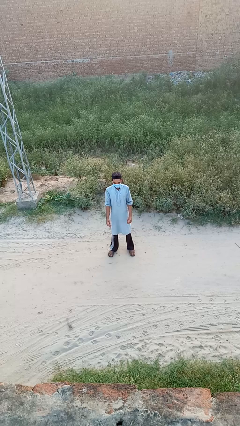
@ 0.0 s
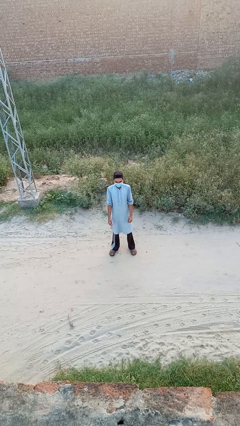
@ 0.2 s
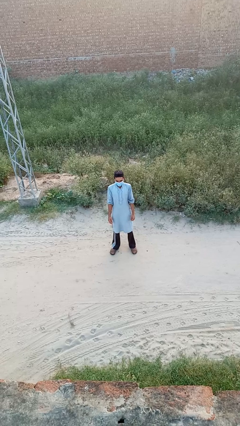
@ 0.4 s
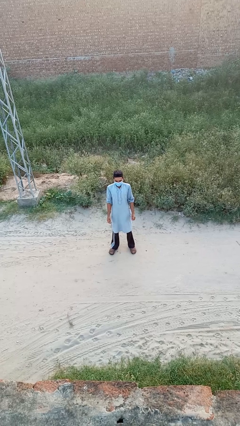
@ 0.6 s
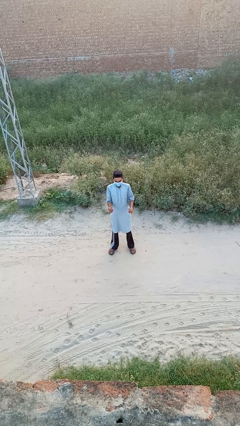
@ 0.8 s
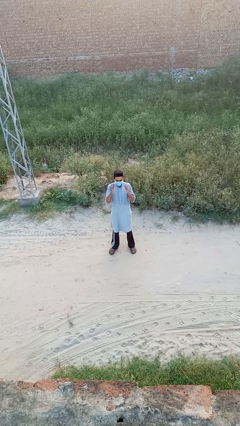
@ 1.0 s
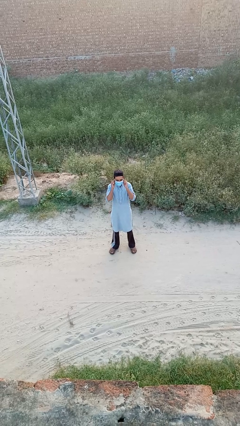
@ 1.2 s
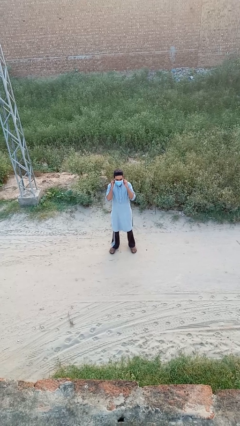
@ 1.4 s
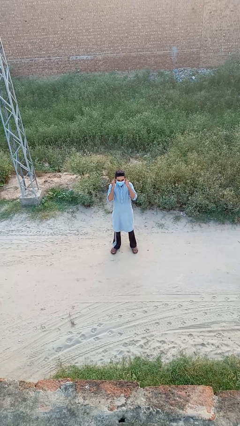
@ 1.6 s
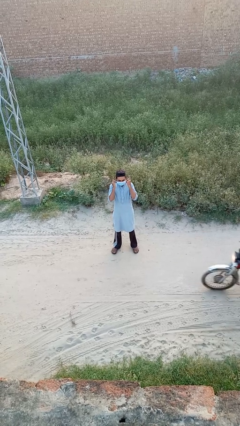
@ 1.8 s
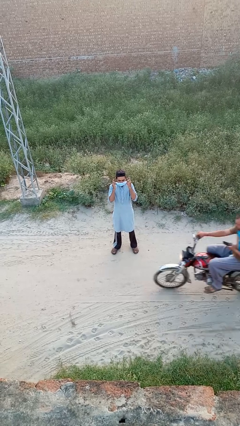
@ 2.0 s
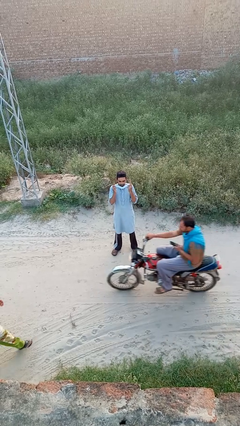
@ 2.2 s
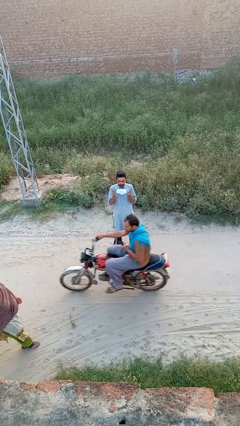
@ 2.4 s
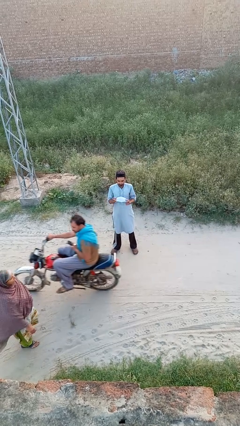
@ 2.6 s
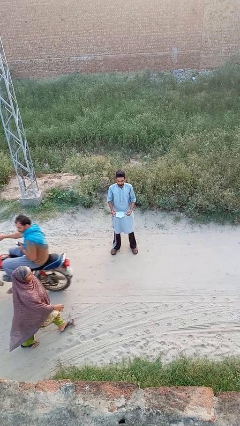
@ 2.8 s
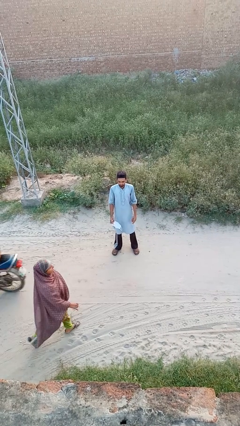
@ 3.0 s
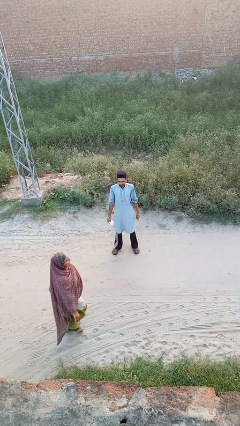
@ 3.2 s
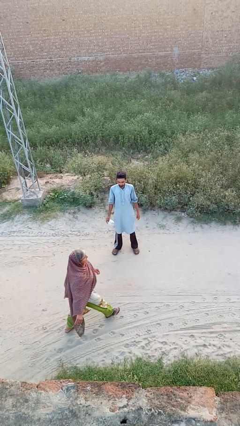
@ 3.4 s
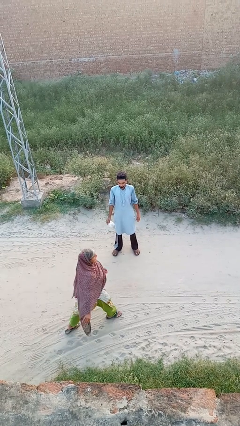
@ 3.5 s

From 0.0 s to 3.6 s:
person takes off facemask

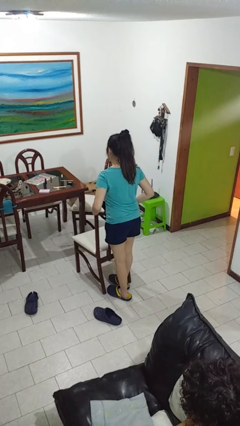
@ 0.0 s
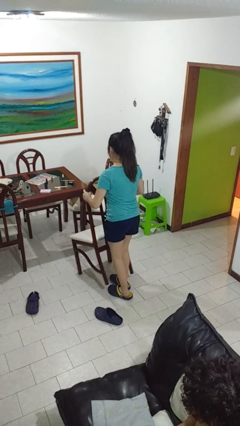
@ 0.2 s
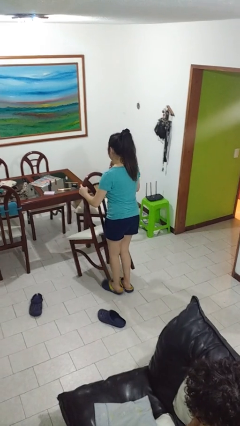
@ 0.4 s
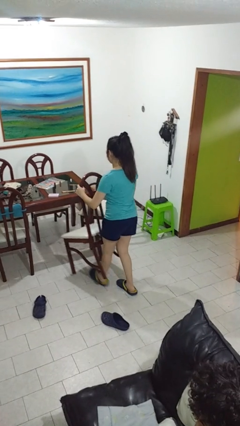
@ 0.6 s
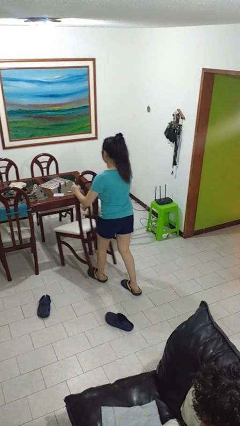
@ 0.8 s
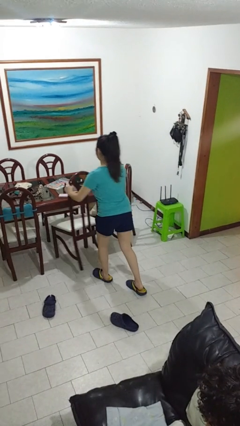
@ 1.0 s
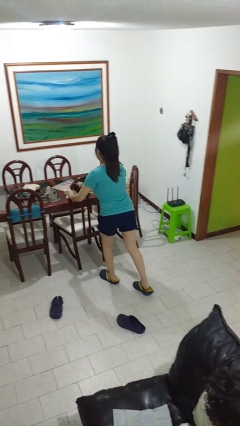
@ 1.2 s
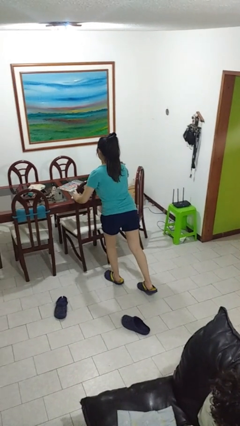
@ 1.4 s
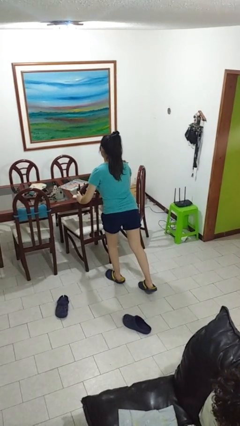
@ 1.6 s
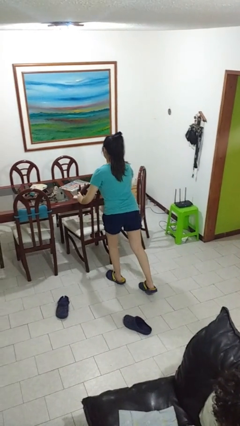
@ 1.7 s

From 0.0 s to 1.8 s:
person pushes in chair

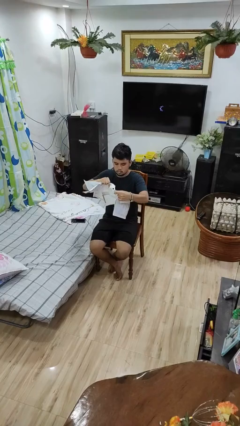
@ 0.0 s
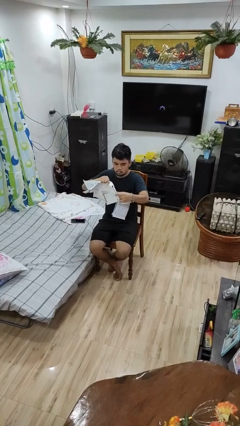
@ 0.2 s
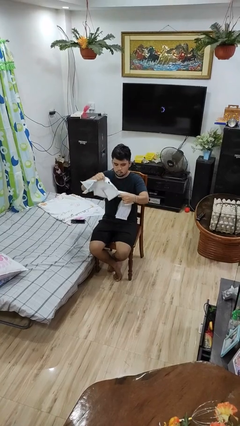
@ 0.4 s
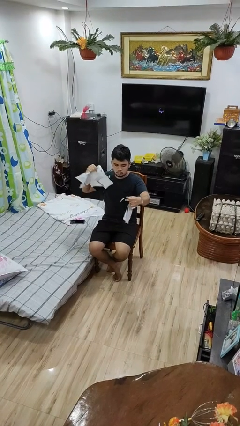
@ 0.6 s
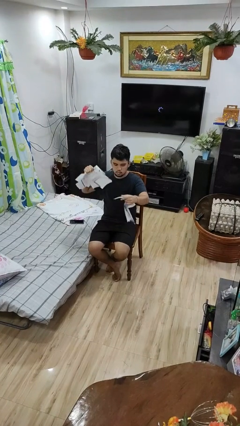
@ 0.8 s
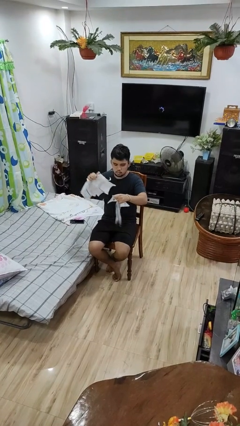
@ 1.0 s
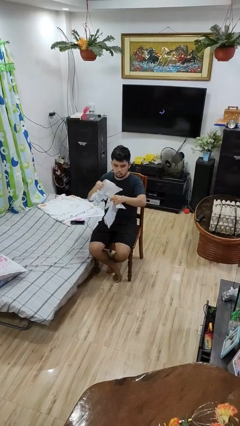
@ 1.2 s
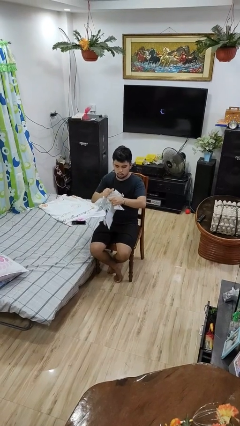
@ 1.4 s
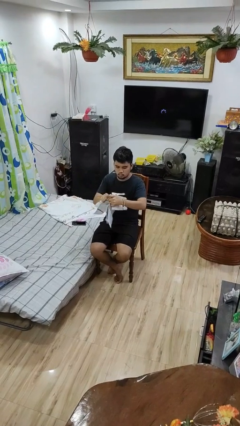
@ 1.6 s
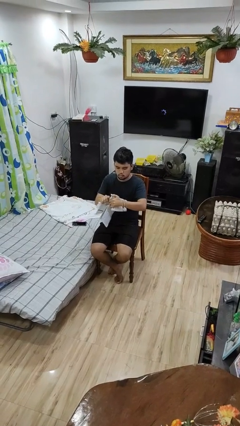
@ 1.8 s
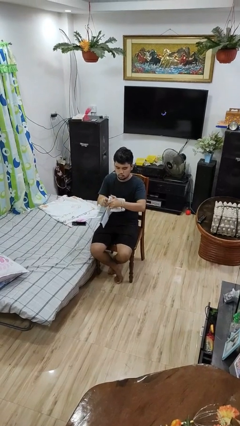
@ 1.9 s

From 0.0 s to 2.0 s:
person tears paper

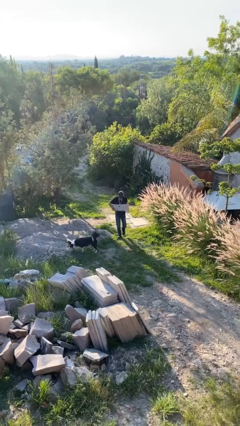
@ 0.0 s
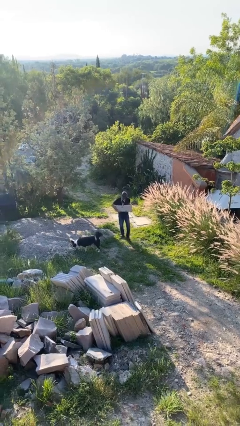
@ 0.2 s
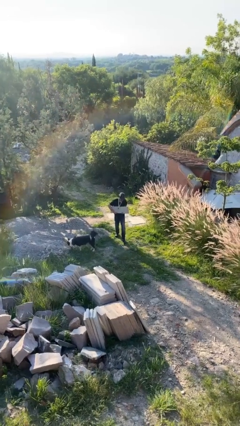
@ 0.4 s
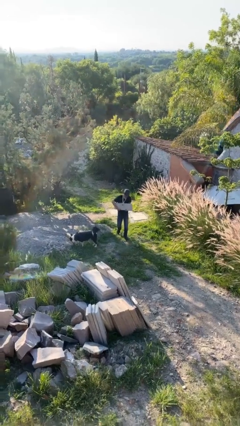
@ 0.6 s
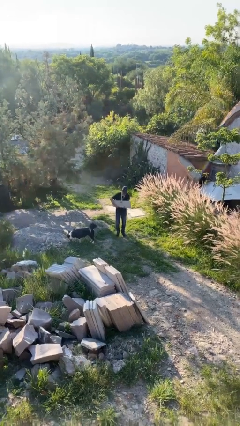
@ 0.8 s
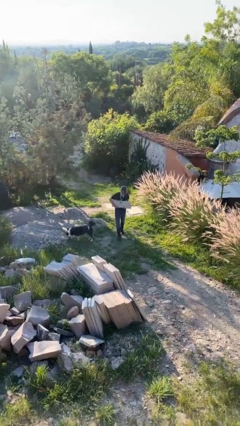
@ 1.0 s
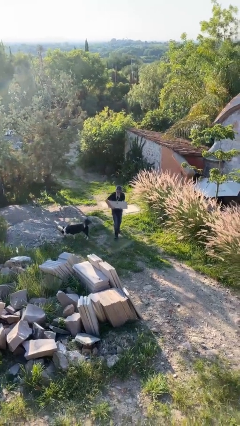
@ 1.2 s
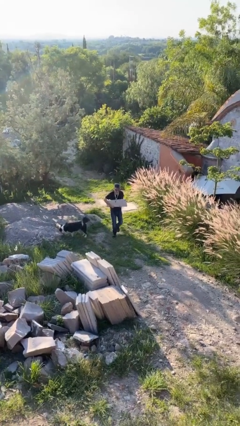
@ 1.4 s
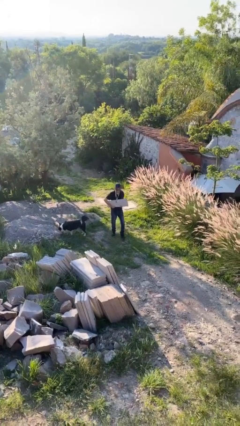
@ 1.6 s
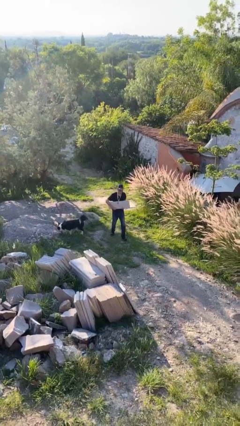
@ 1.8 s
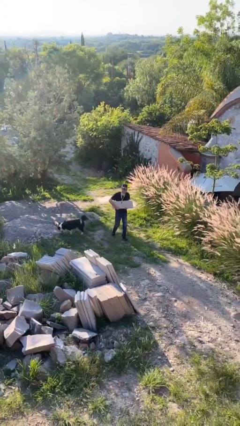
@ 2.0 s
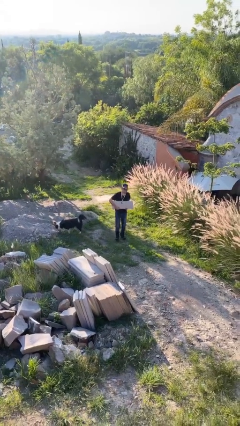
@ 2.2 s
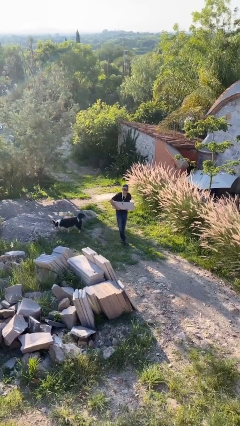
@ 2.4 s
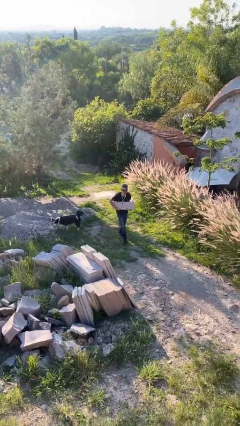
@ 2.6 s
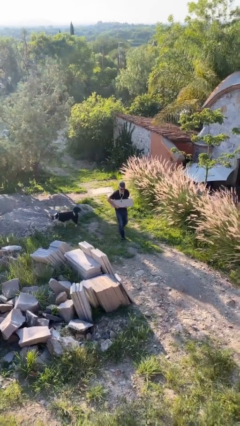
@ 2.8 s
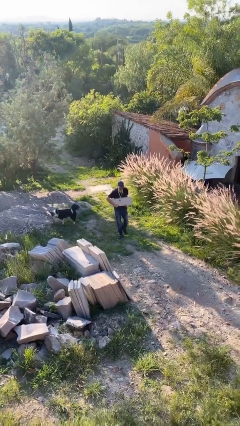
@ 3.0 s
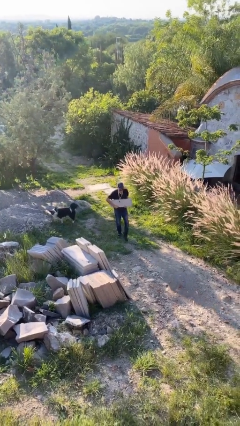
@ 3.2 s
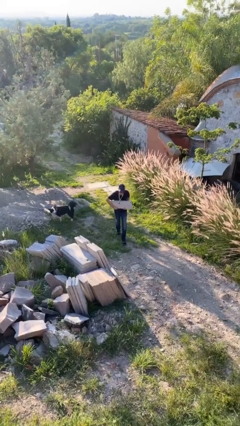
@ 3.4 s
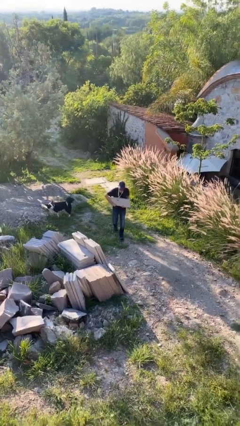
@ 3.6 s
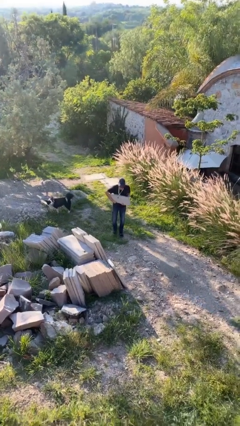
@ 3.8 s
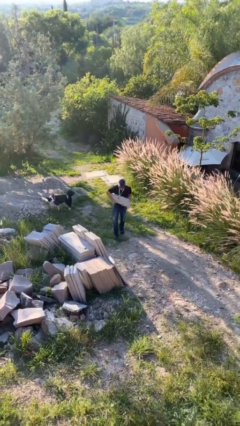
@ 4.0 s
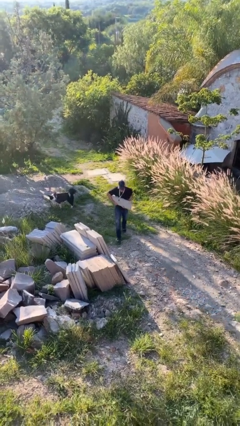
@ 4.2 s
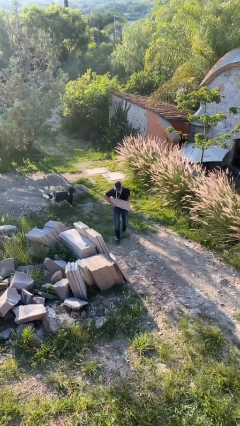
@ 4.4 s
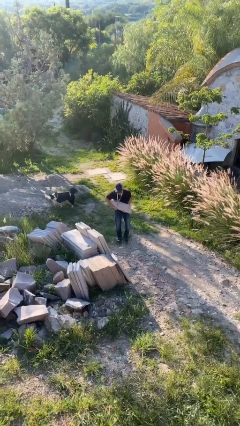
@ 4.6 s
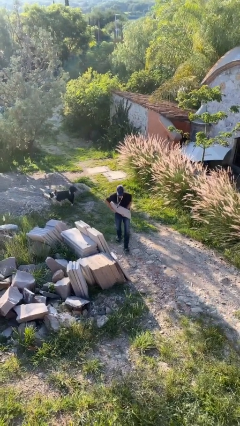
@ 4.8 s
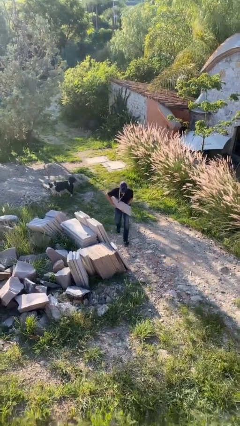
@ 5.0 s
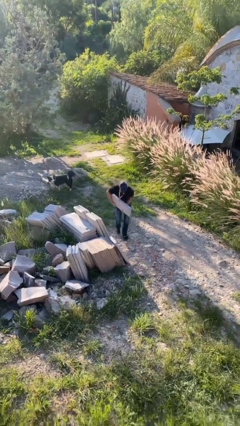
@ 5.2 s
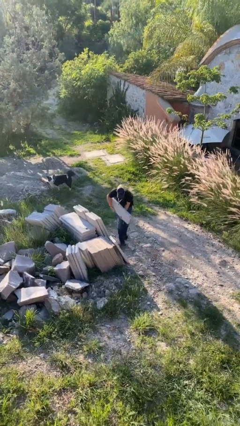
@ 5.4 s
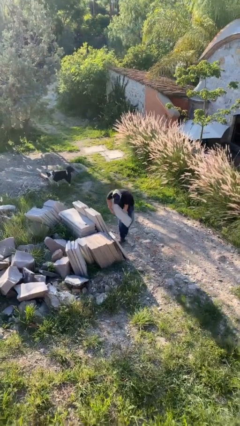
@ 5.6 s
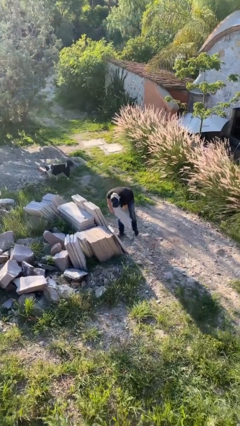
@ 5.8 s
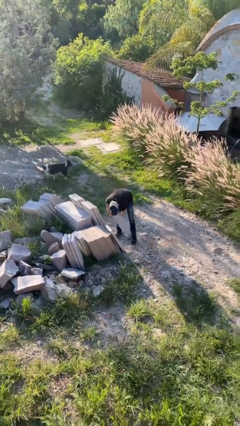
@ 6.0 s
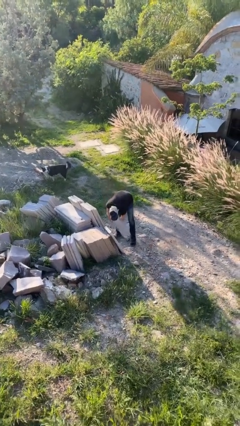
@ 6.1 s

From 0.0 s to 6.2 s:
person carries heavy object

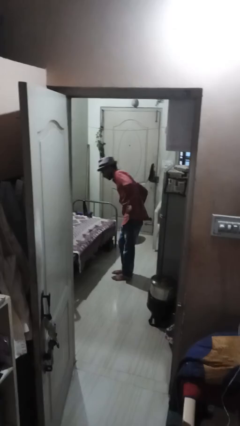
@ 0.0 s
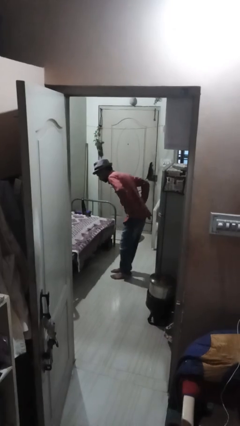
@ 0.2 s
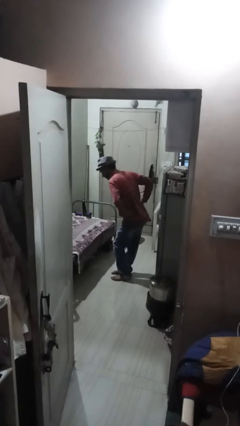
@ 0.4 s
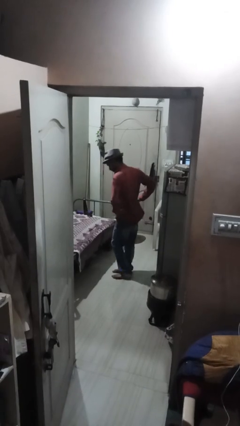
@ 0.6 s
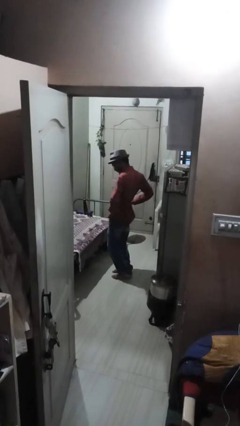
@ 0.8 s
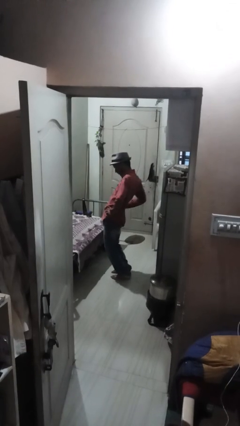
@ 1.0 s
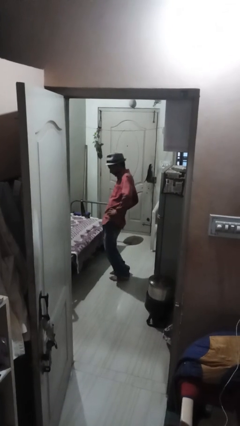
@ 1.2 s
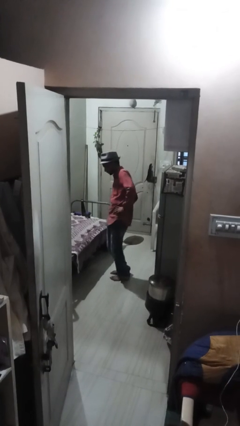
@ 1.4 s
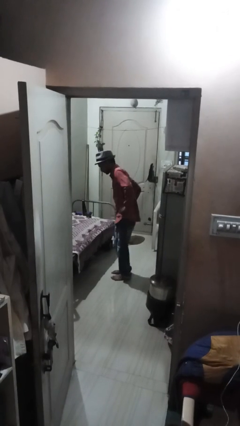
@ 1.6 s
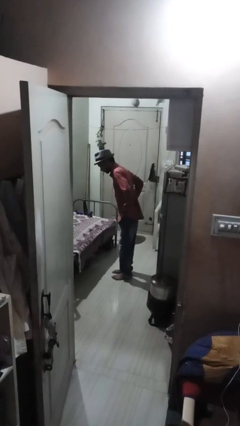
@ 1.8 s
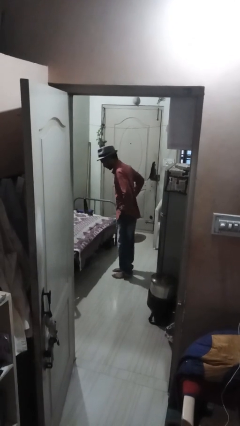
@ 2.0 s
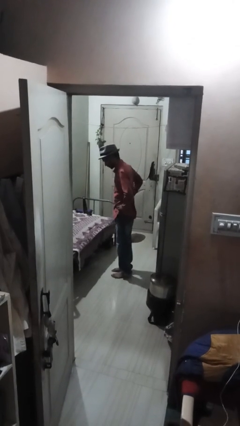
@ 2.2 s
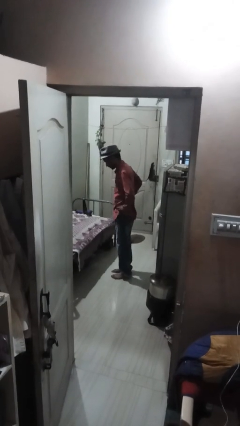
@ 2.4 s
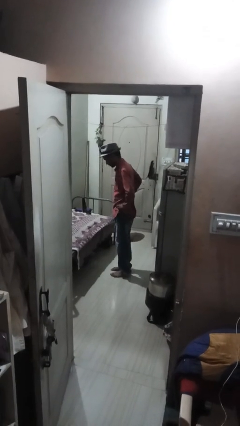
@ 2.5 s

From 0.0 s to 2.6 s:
person wiggles hips

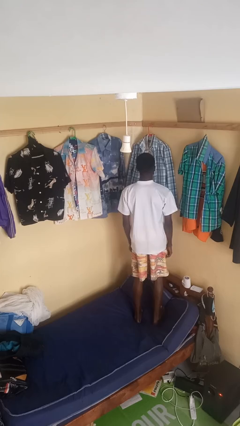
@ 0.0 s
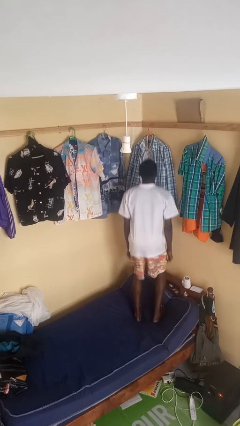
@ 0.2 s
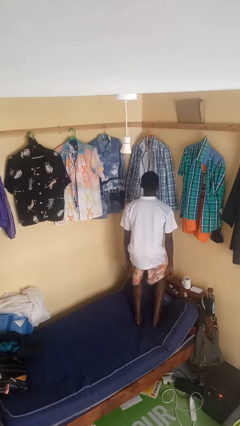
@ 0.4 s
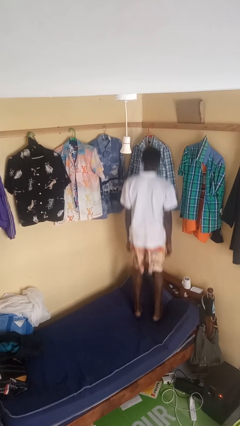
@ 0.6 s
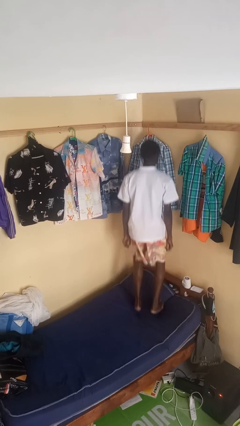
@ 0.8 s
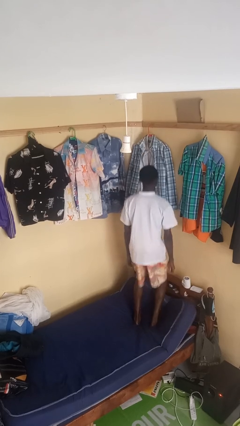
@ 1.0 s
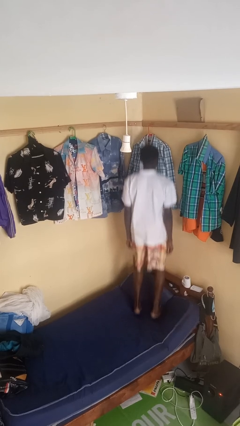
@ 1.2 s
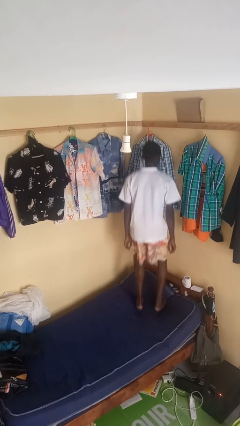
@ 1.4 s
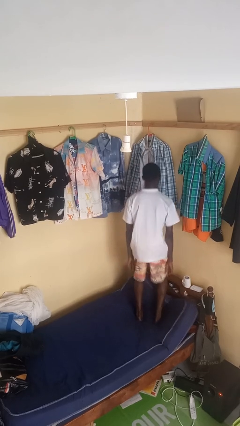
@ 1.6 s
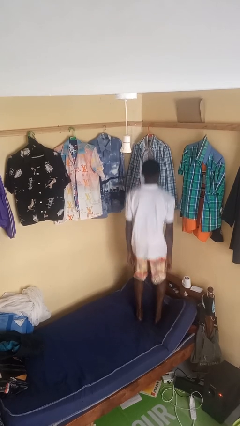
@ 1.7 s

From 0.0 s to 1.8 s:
person jumps on bed
